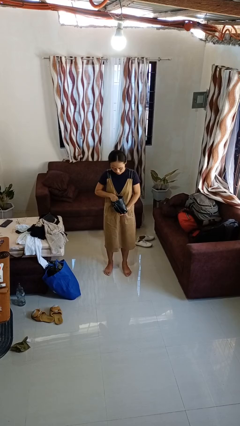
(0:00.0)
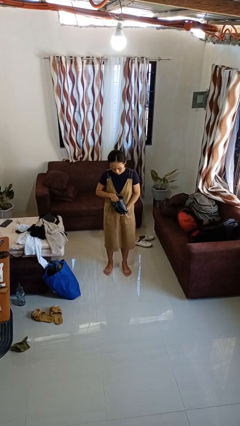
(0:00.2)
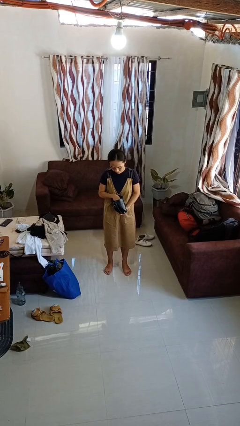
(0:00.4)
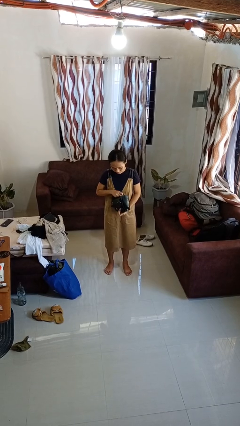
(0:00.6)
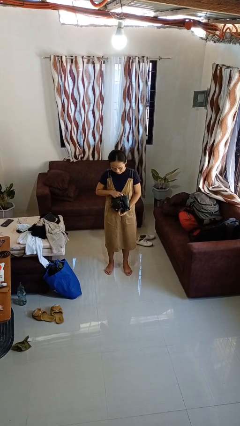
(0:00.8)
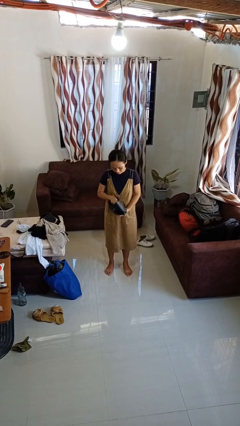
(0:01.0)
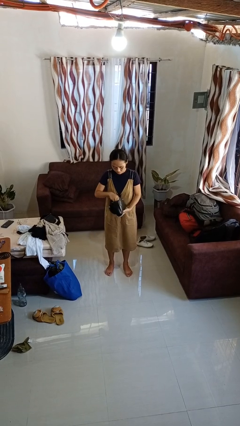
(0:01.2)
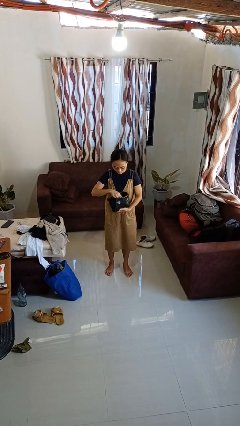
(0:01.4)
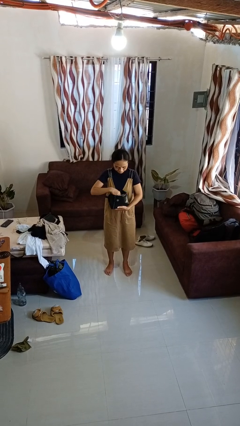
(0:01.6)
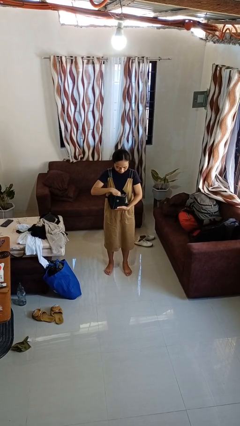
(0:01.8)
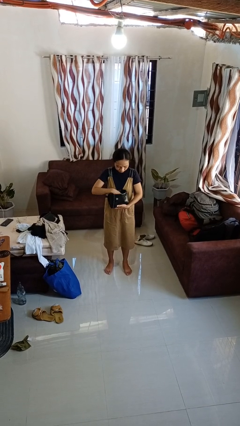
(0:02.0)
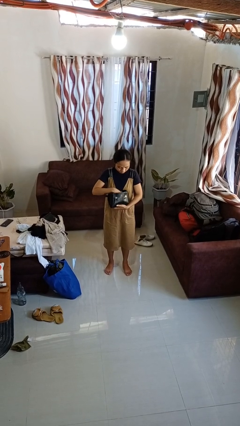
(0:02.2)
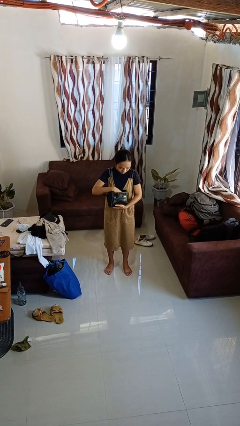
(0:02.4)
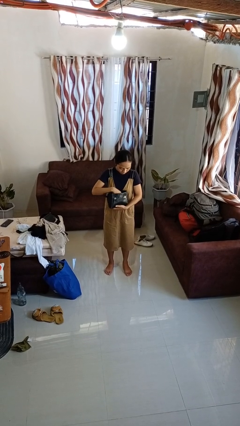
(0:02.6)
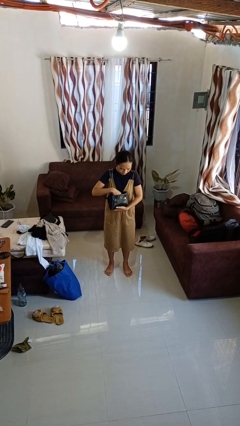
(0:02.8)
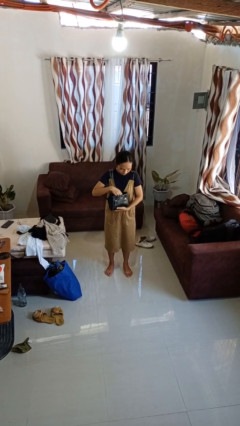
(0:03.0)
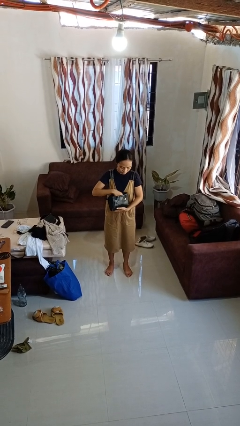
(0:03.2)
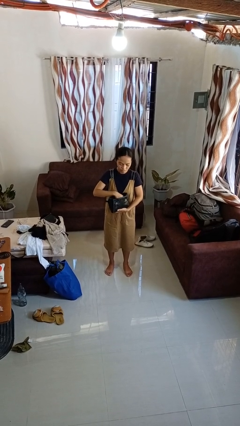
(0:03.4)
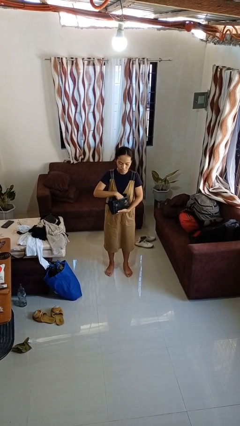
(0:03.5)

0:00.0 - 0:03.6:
person searches in purse

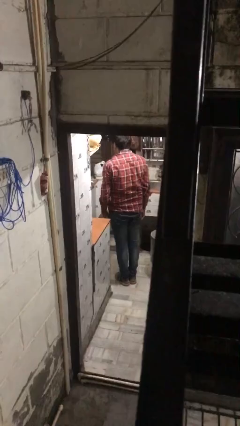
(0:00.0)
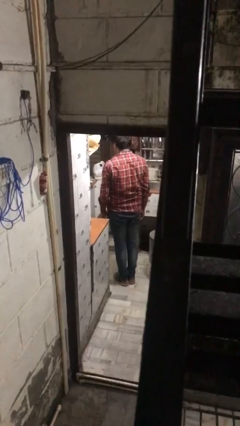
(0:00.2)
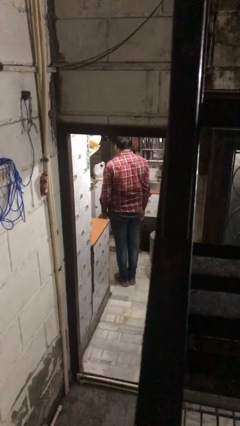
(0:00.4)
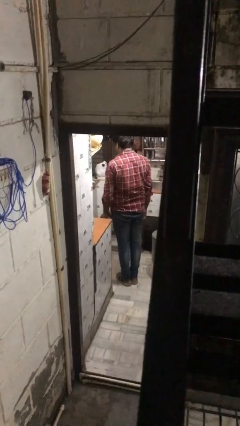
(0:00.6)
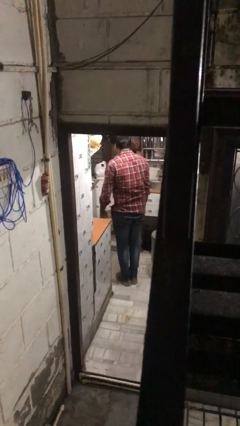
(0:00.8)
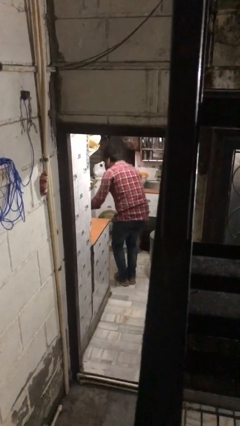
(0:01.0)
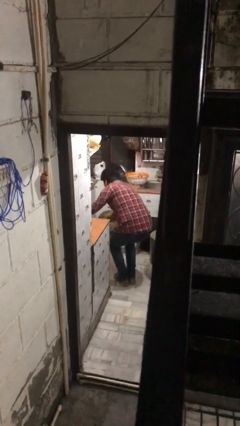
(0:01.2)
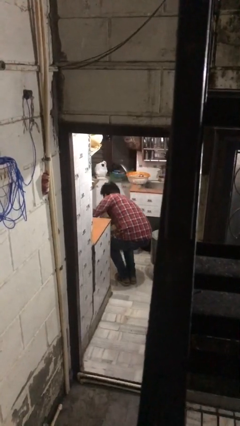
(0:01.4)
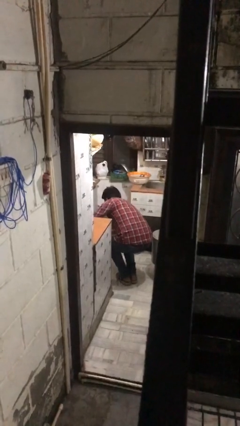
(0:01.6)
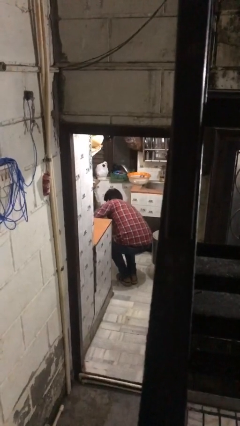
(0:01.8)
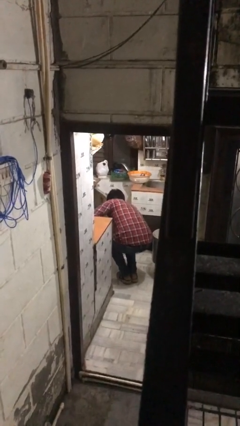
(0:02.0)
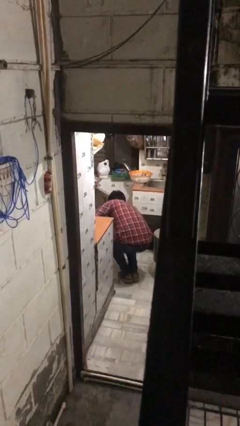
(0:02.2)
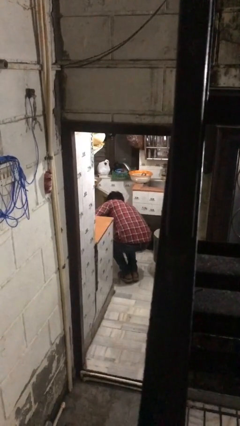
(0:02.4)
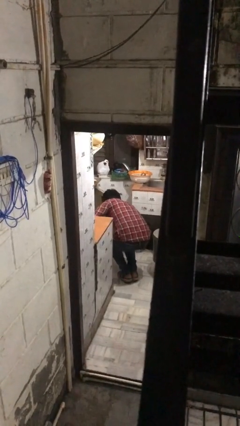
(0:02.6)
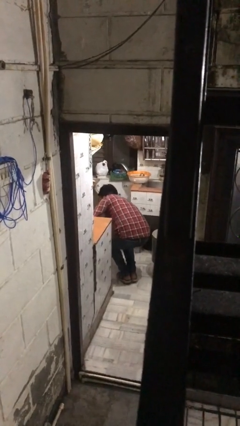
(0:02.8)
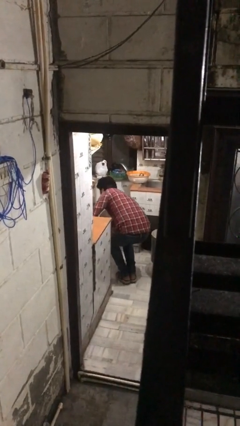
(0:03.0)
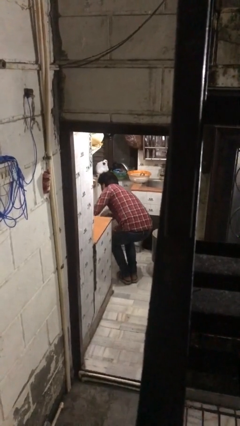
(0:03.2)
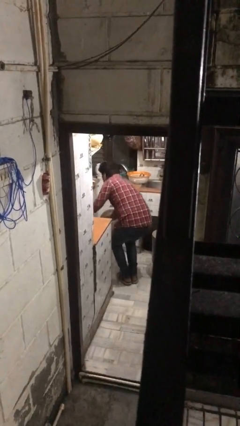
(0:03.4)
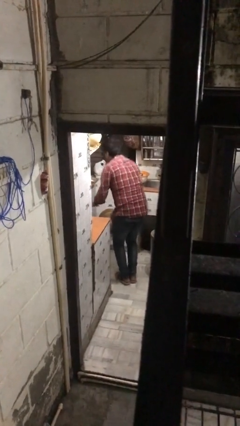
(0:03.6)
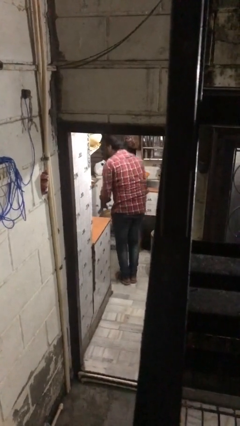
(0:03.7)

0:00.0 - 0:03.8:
person searches in kitchen drawer

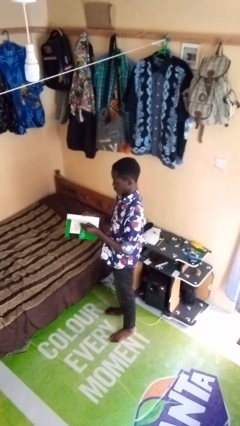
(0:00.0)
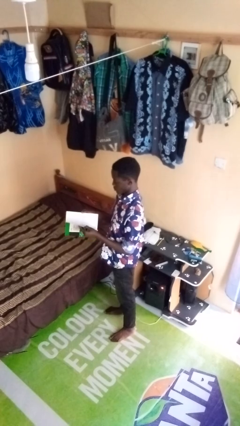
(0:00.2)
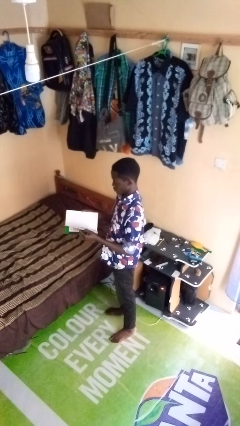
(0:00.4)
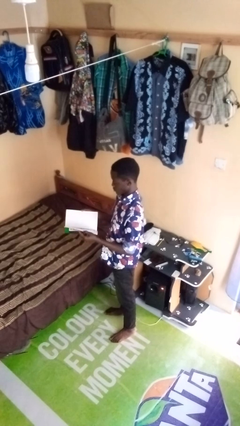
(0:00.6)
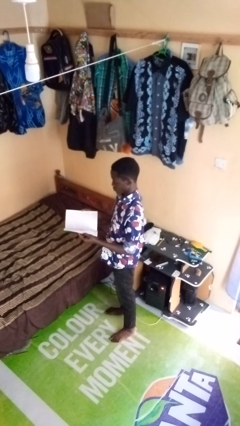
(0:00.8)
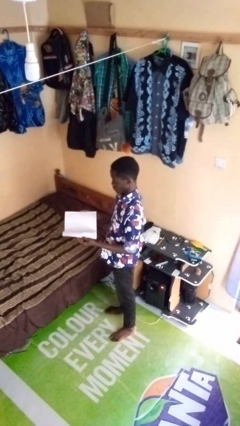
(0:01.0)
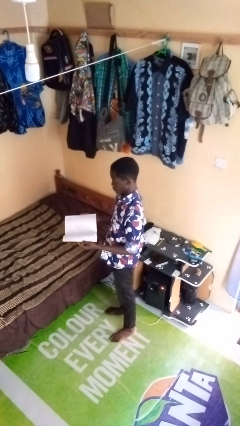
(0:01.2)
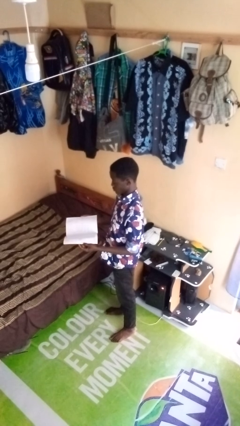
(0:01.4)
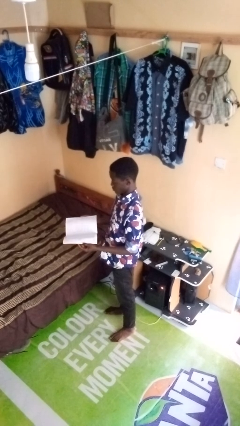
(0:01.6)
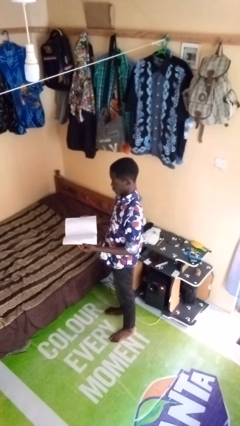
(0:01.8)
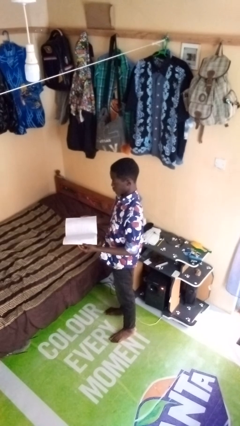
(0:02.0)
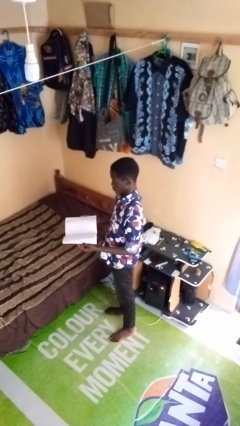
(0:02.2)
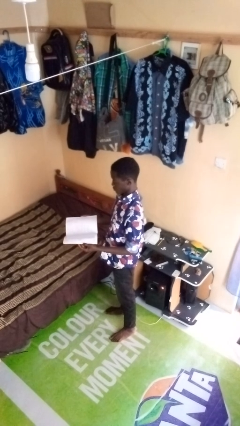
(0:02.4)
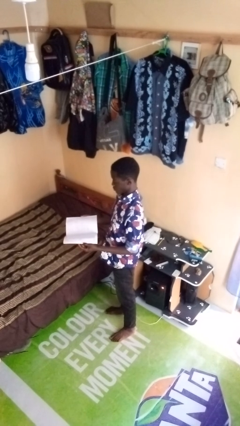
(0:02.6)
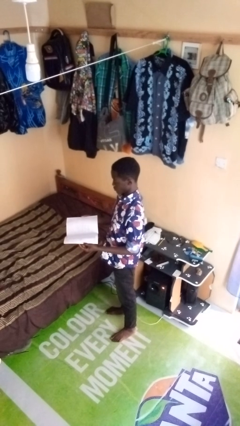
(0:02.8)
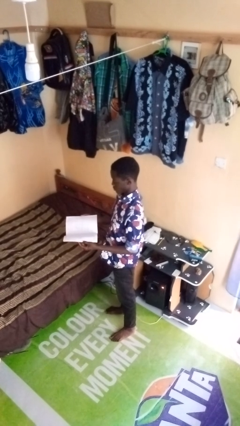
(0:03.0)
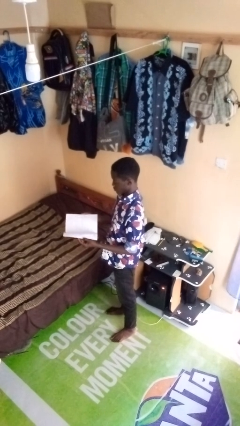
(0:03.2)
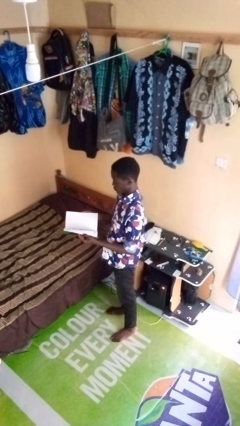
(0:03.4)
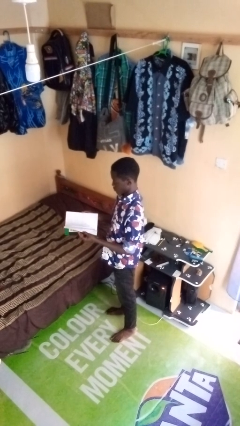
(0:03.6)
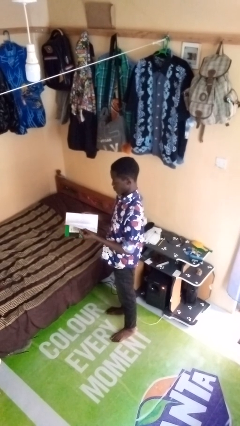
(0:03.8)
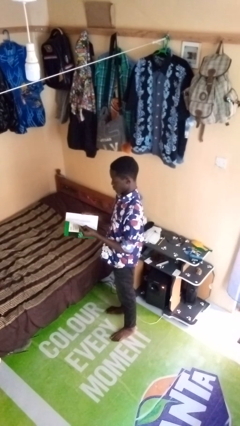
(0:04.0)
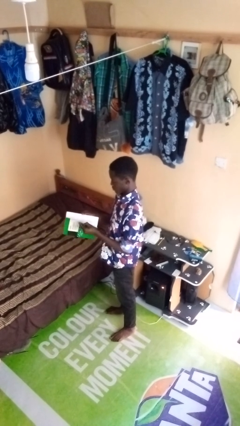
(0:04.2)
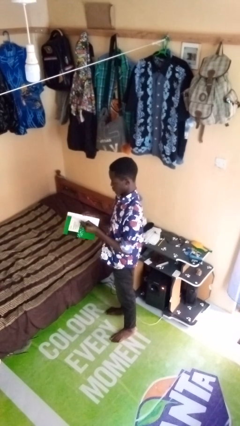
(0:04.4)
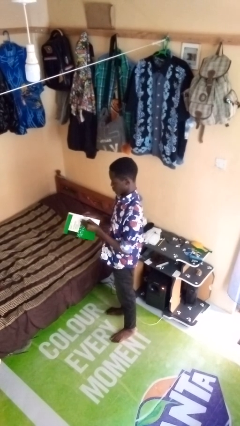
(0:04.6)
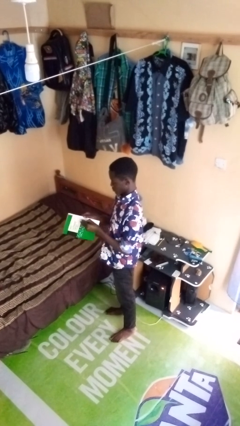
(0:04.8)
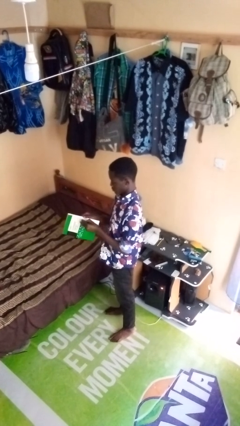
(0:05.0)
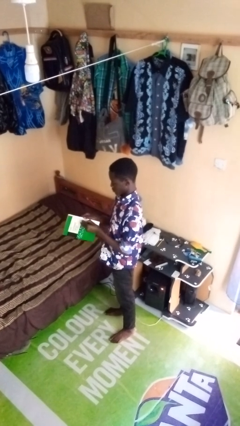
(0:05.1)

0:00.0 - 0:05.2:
person reads magazine

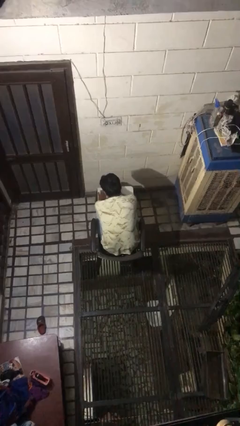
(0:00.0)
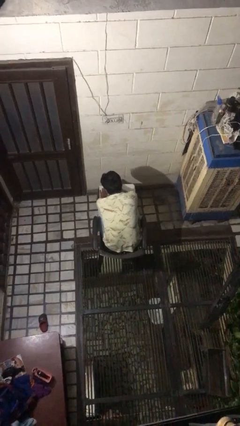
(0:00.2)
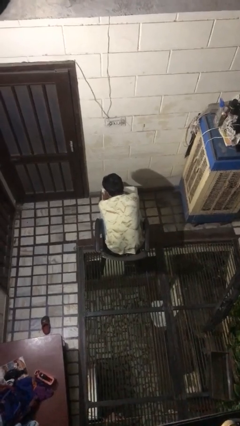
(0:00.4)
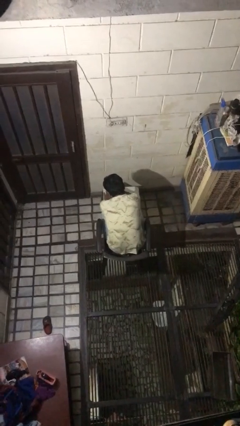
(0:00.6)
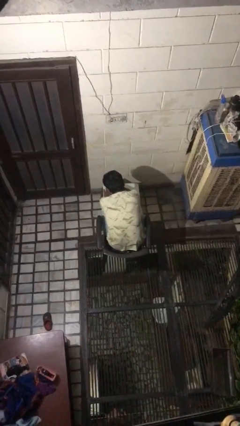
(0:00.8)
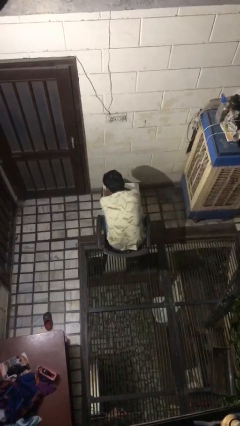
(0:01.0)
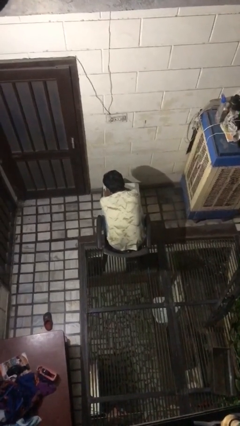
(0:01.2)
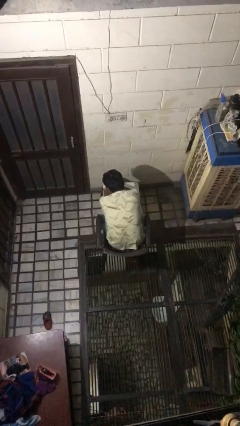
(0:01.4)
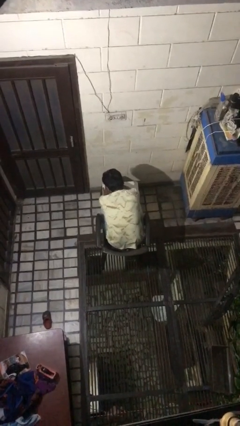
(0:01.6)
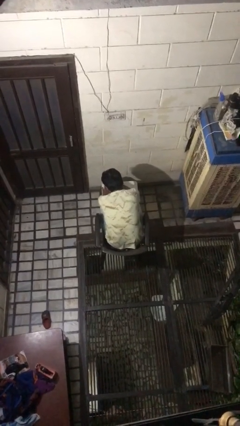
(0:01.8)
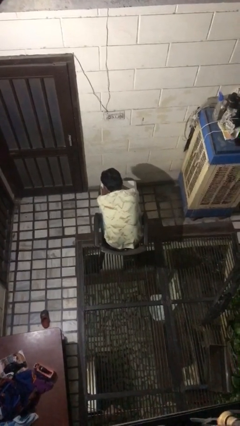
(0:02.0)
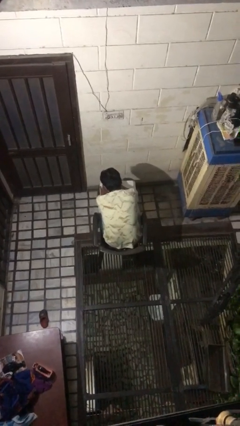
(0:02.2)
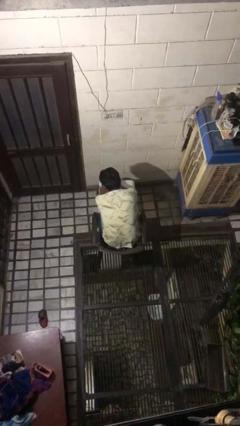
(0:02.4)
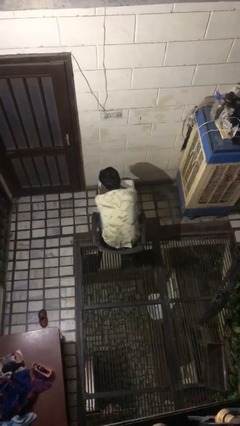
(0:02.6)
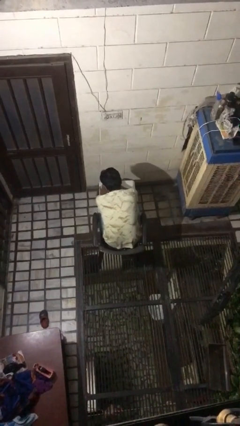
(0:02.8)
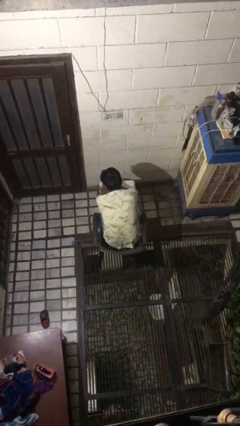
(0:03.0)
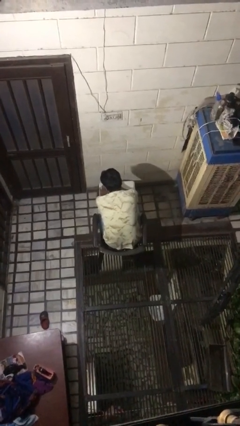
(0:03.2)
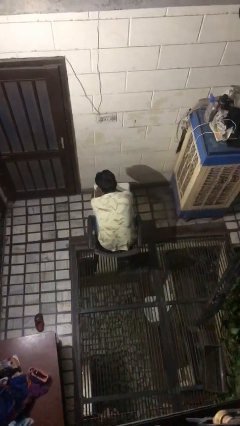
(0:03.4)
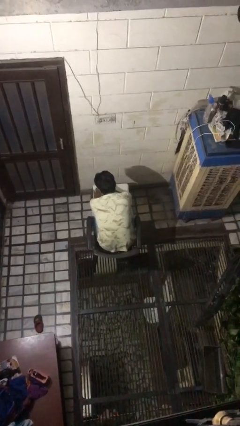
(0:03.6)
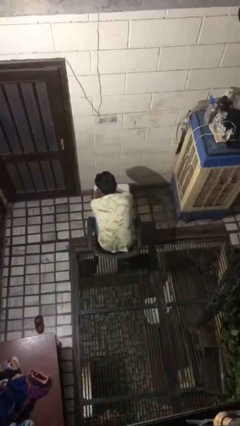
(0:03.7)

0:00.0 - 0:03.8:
person paints fingernails

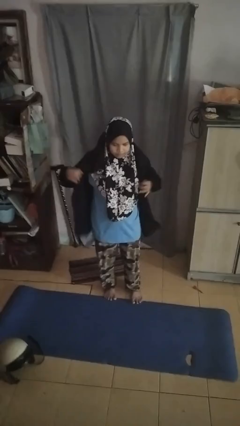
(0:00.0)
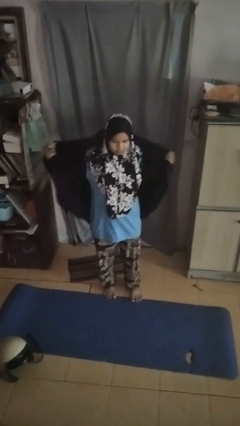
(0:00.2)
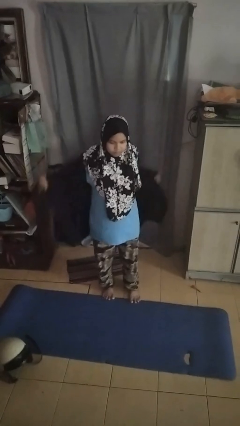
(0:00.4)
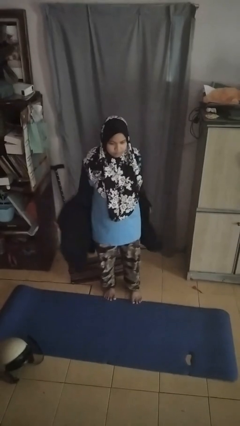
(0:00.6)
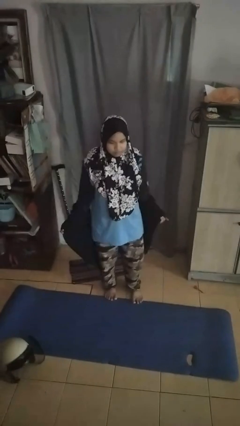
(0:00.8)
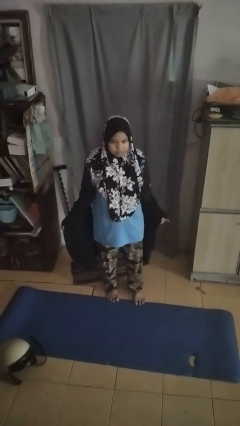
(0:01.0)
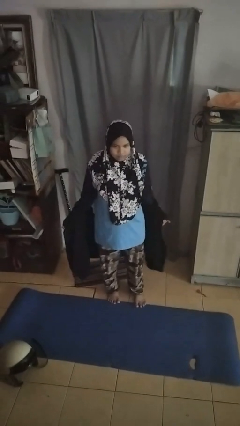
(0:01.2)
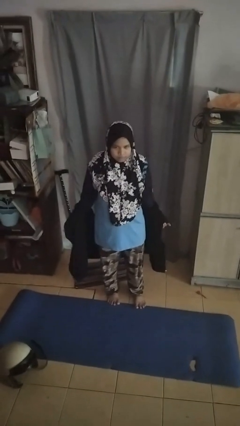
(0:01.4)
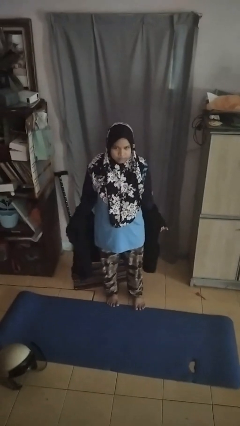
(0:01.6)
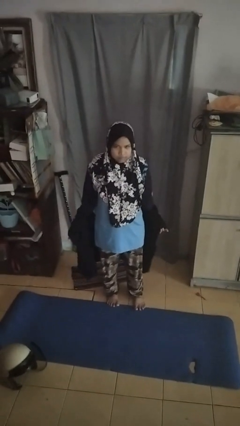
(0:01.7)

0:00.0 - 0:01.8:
person takes off jacket
